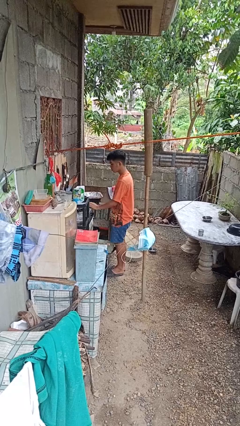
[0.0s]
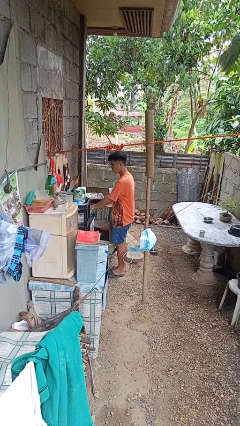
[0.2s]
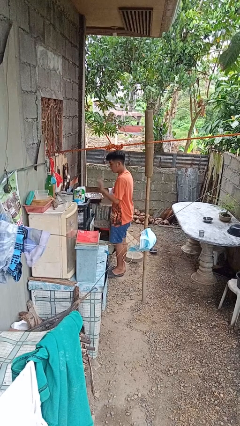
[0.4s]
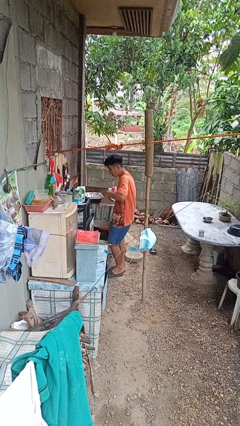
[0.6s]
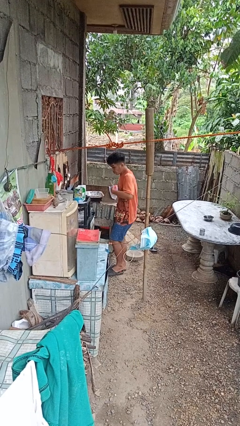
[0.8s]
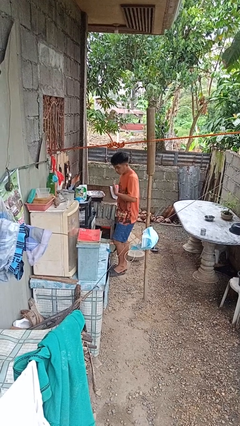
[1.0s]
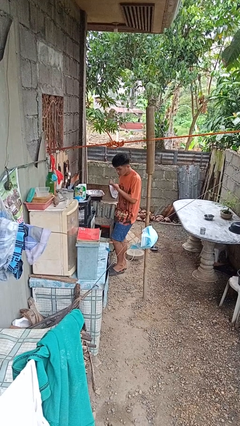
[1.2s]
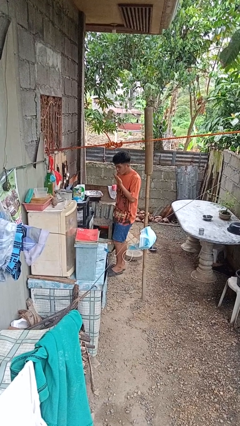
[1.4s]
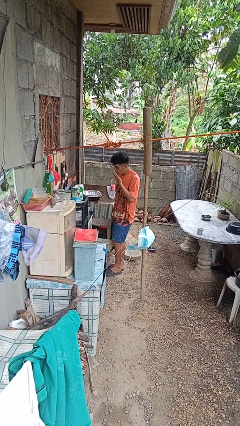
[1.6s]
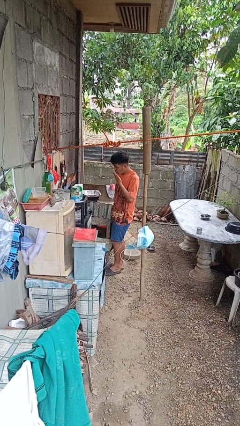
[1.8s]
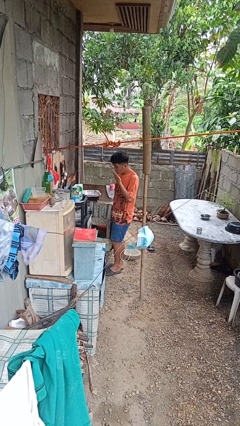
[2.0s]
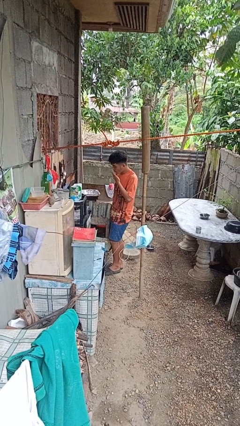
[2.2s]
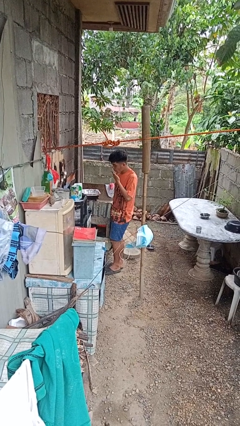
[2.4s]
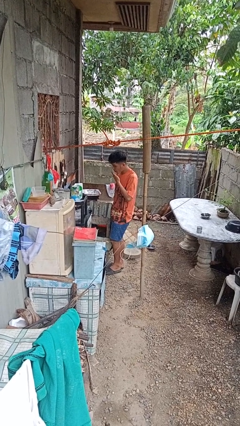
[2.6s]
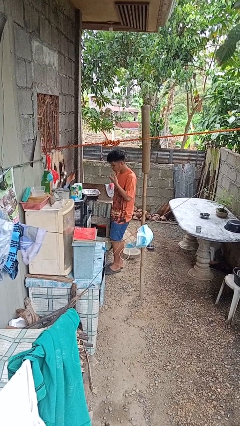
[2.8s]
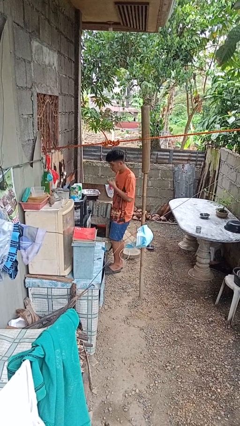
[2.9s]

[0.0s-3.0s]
person burns hand

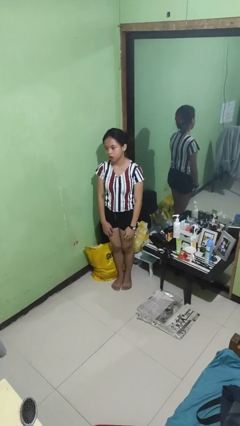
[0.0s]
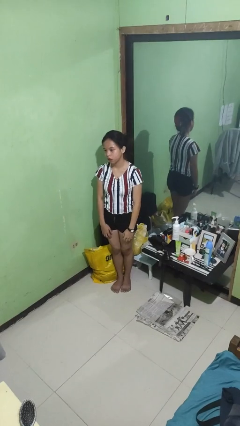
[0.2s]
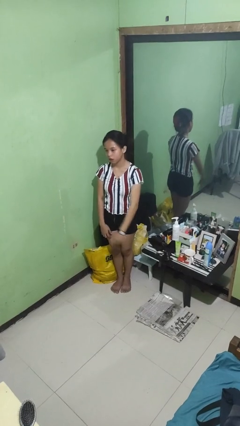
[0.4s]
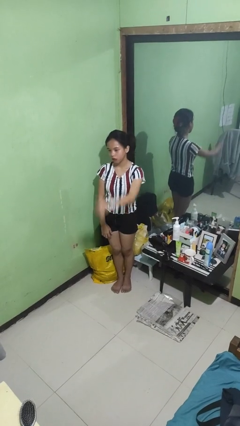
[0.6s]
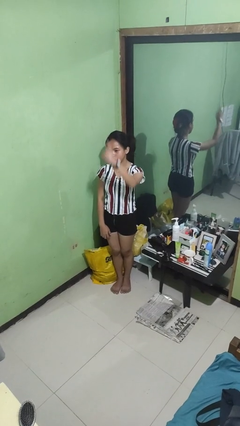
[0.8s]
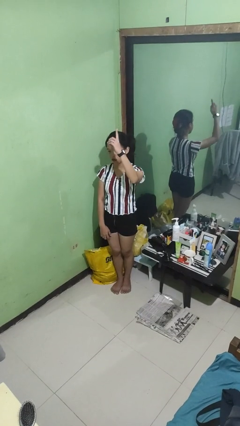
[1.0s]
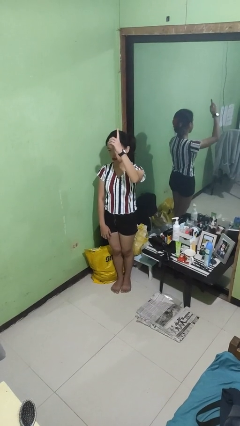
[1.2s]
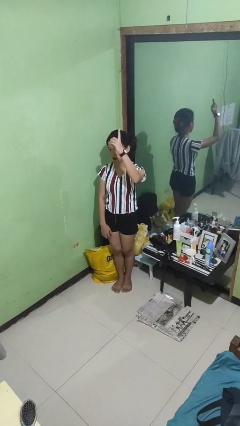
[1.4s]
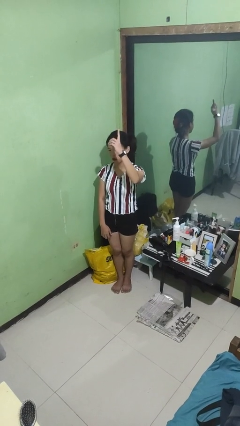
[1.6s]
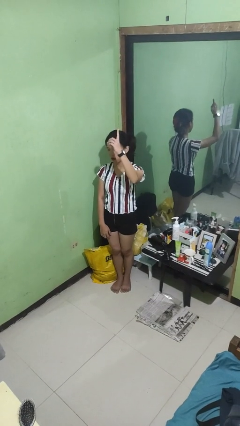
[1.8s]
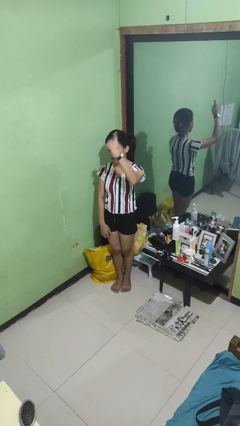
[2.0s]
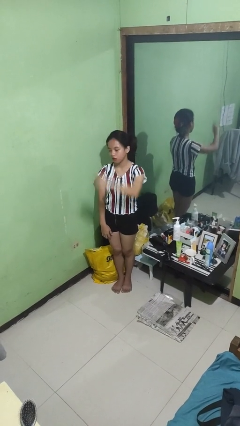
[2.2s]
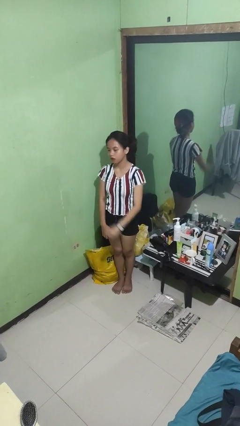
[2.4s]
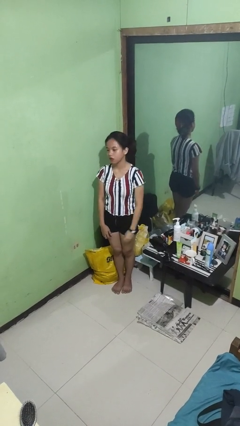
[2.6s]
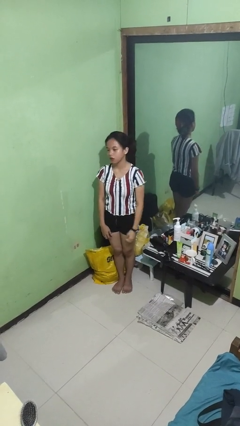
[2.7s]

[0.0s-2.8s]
person gestures number one

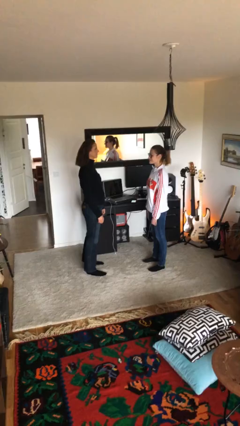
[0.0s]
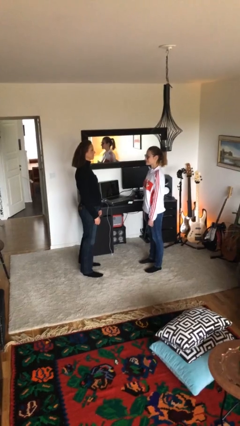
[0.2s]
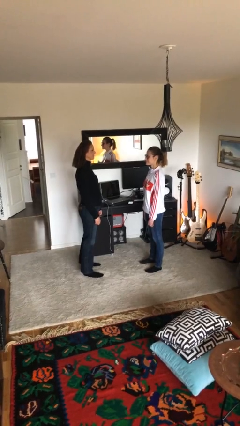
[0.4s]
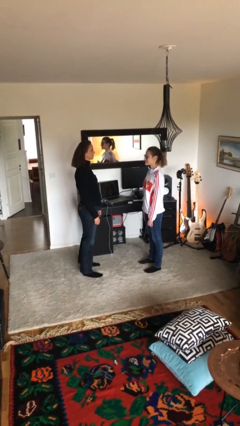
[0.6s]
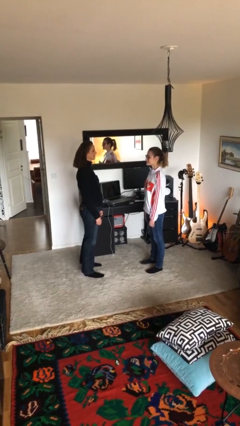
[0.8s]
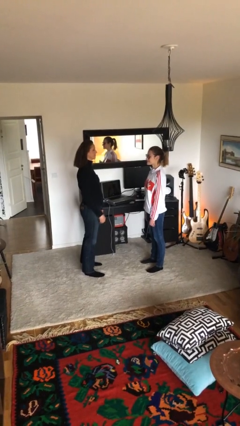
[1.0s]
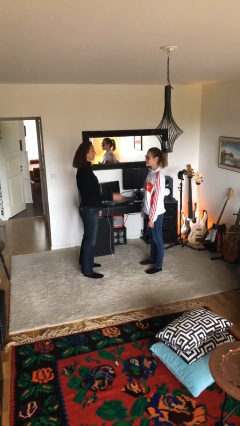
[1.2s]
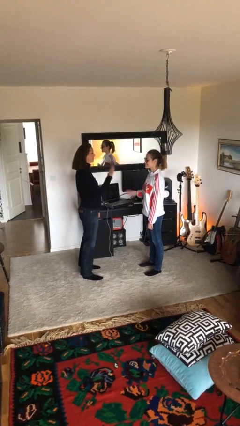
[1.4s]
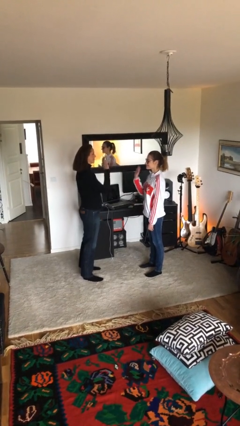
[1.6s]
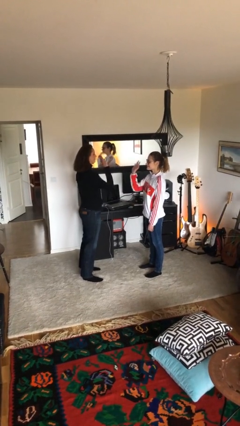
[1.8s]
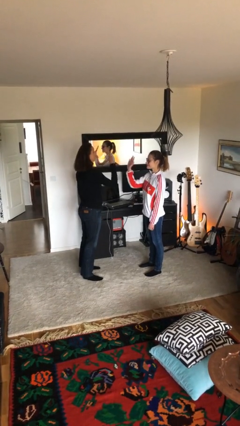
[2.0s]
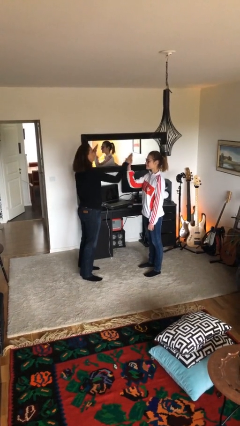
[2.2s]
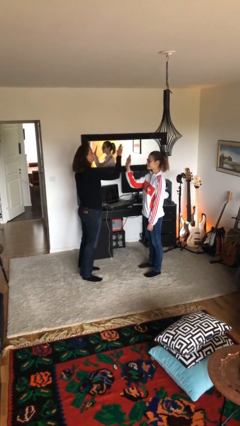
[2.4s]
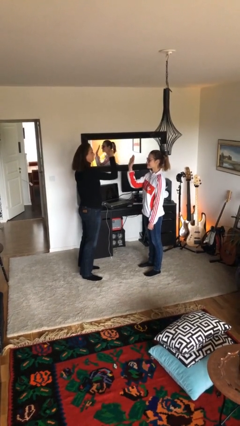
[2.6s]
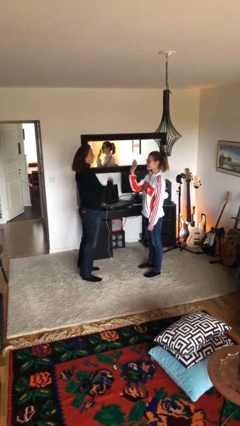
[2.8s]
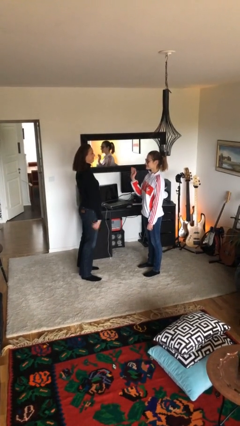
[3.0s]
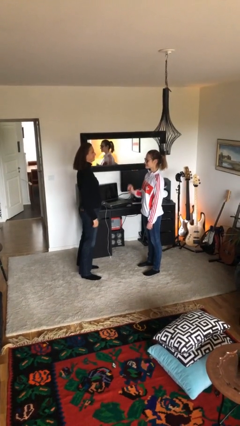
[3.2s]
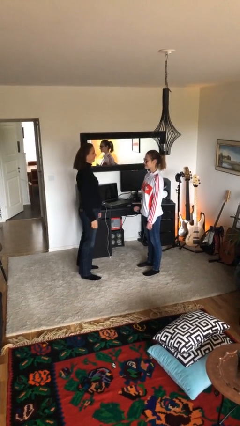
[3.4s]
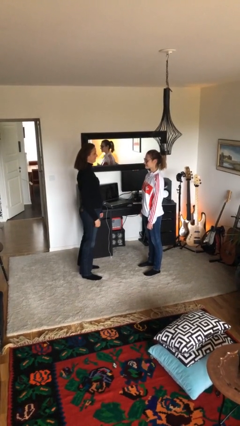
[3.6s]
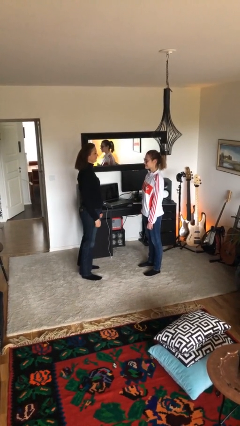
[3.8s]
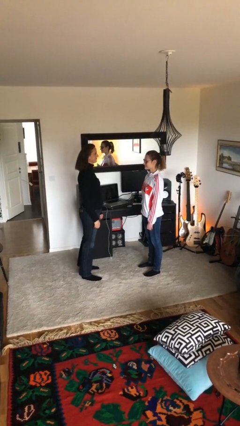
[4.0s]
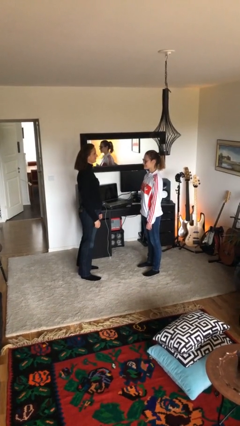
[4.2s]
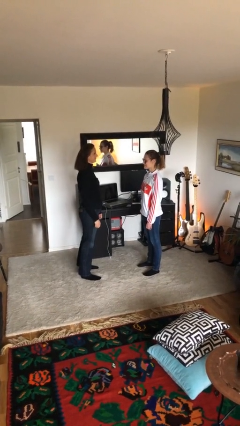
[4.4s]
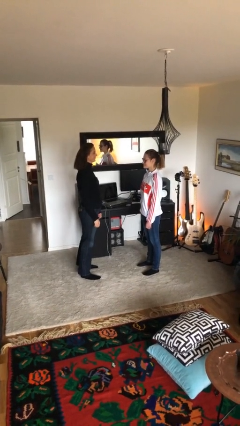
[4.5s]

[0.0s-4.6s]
person highfives hand

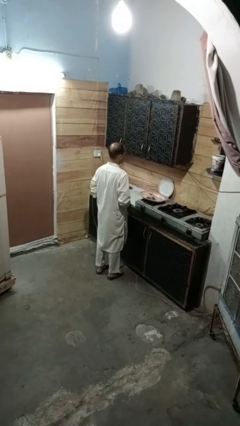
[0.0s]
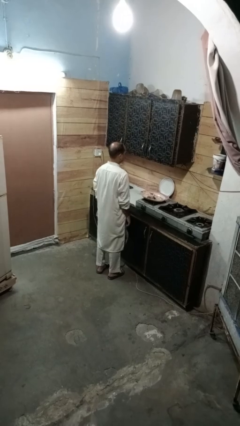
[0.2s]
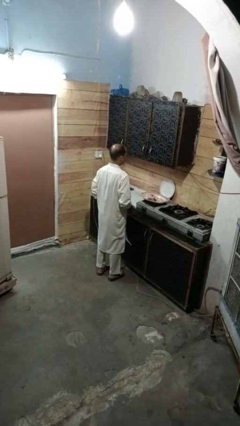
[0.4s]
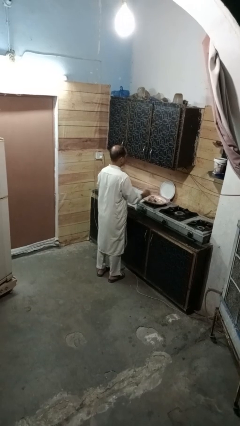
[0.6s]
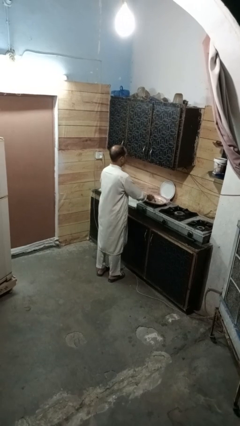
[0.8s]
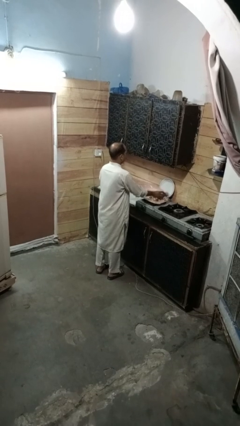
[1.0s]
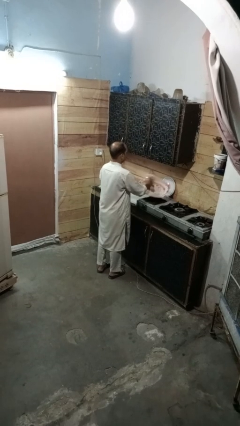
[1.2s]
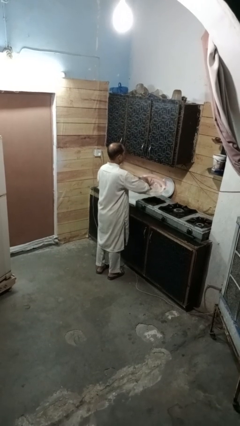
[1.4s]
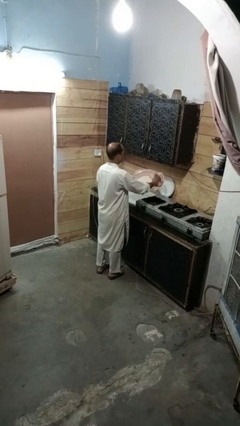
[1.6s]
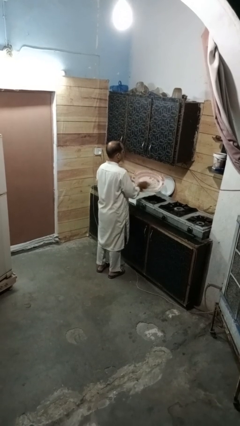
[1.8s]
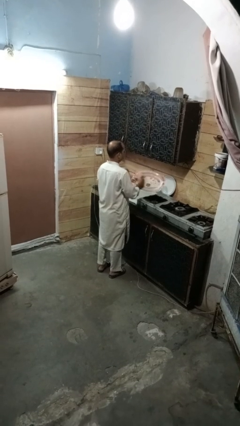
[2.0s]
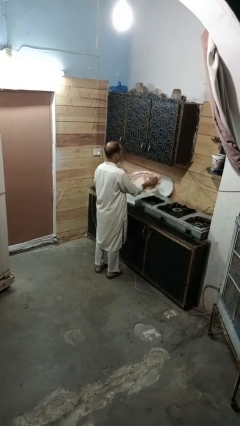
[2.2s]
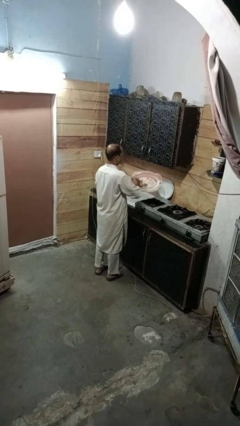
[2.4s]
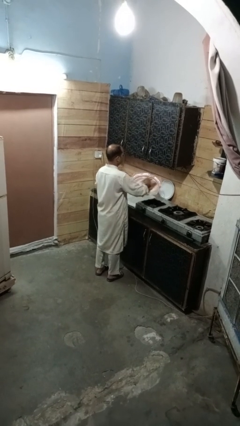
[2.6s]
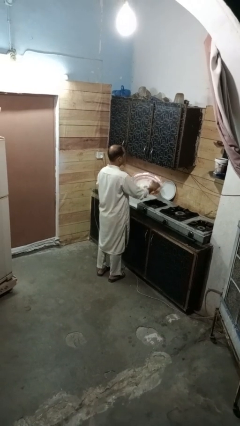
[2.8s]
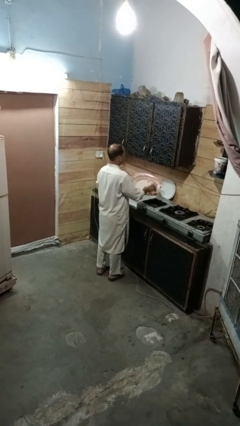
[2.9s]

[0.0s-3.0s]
person dries dish

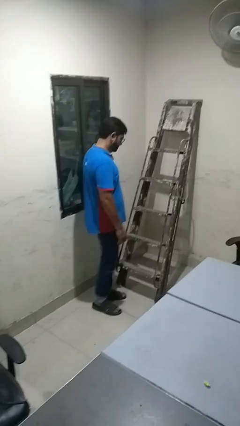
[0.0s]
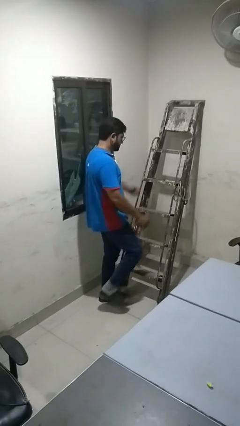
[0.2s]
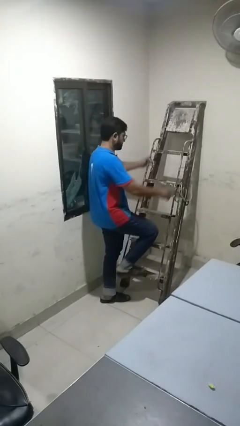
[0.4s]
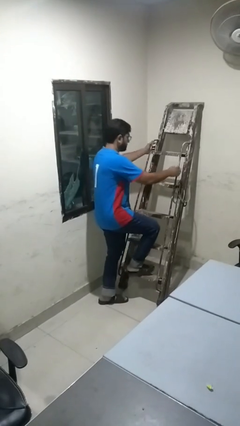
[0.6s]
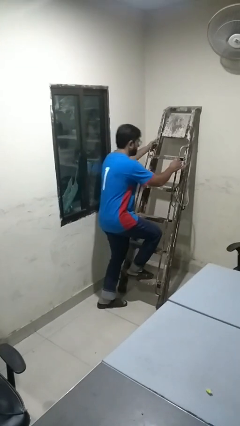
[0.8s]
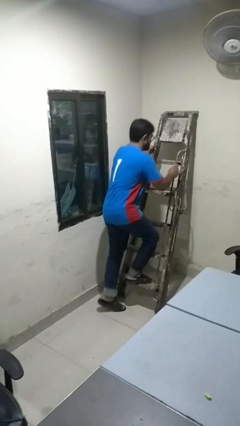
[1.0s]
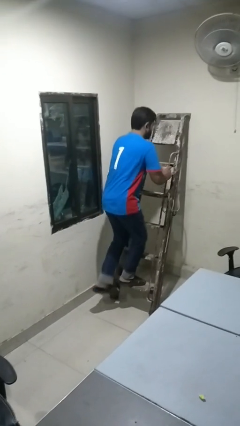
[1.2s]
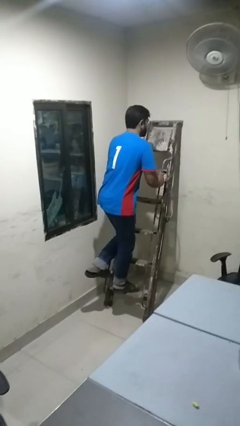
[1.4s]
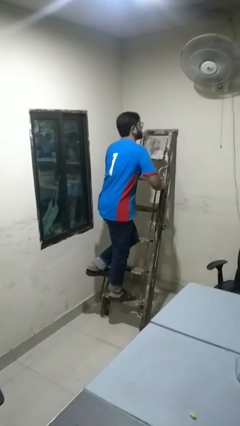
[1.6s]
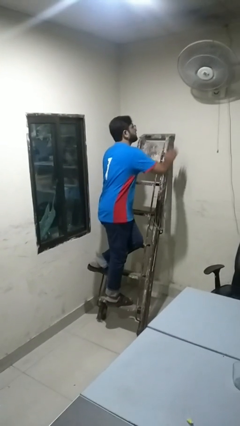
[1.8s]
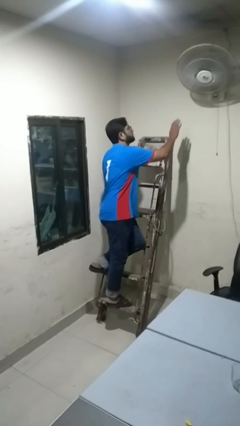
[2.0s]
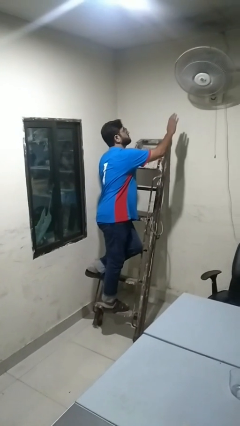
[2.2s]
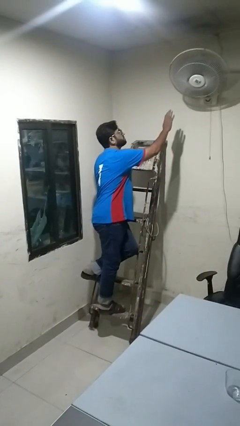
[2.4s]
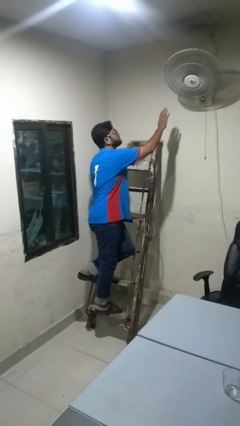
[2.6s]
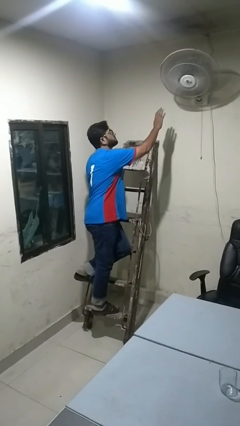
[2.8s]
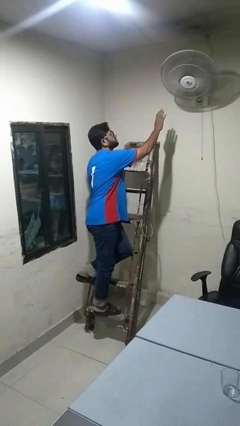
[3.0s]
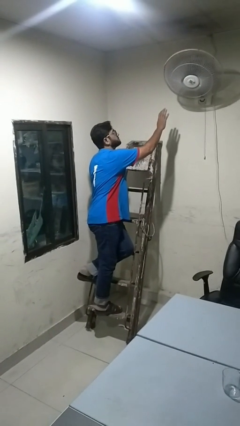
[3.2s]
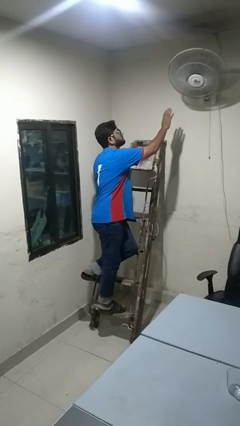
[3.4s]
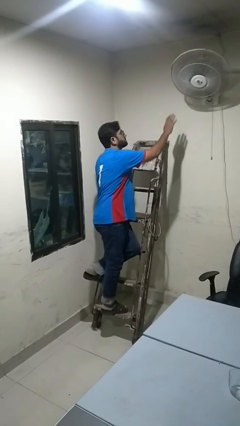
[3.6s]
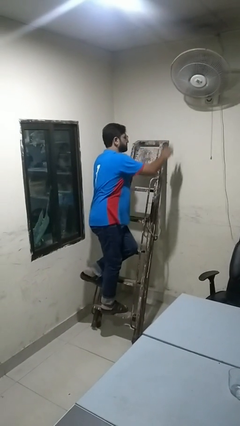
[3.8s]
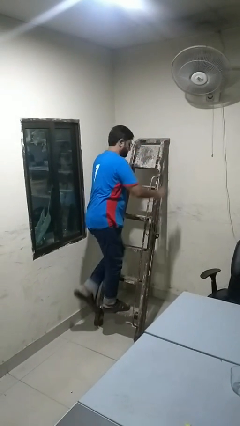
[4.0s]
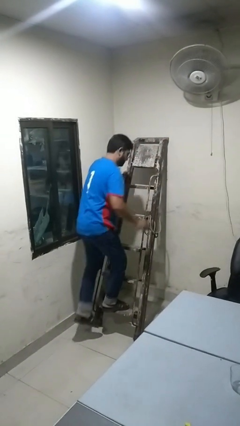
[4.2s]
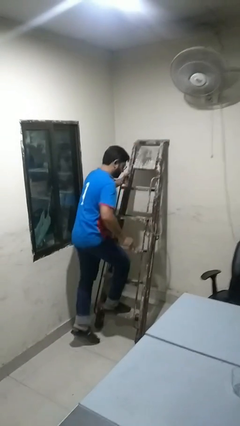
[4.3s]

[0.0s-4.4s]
person climbs up ladder
